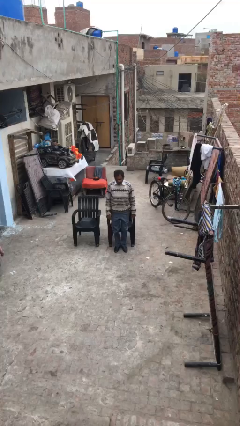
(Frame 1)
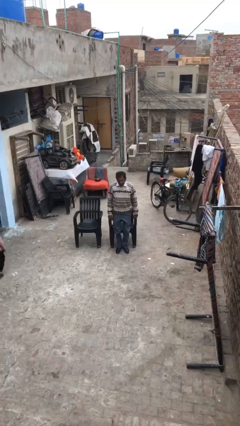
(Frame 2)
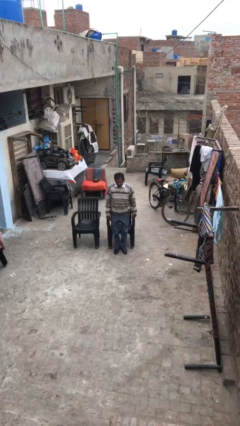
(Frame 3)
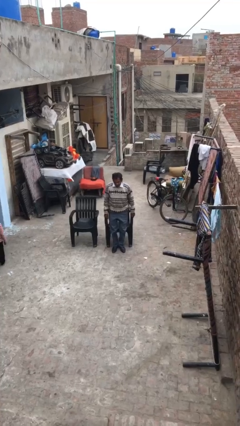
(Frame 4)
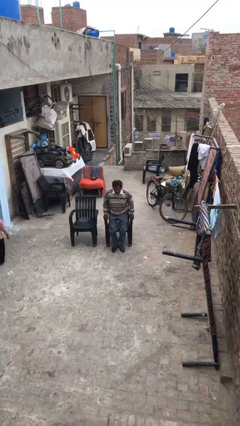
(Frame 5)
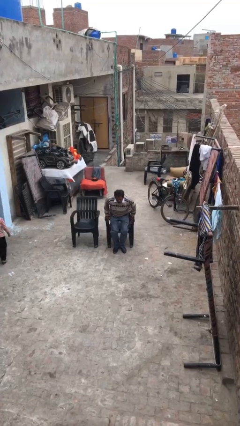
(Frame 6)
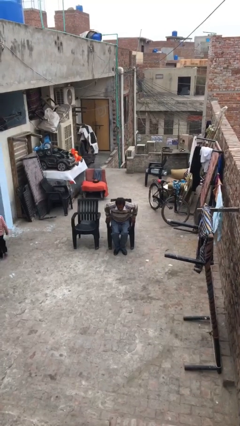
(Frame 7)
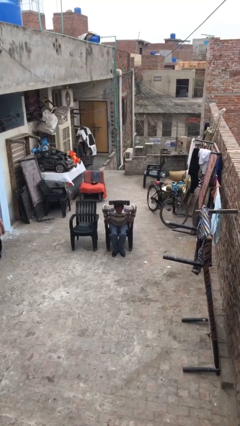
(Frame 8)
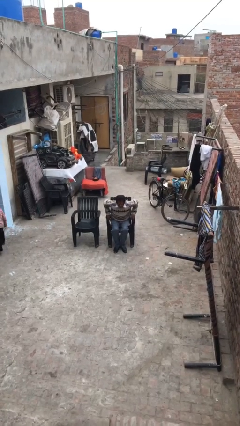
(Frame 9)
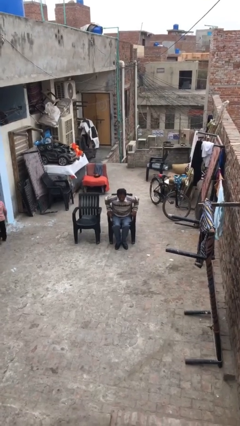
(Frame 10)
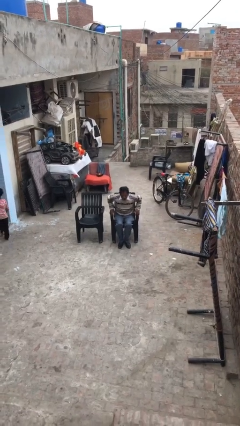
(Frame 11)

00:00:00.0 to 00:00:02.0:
person sits down

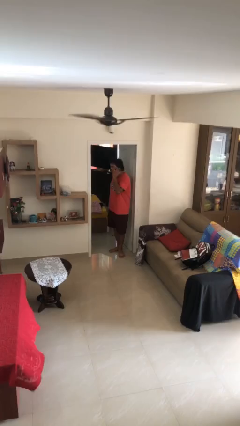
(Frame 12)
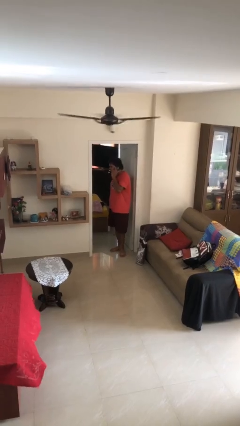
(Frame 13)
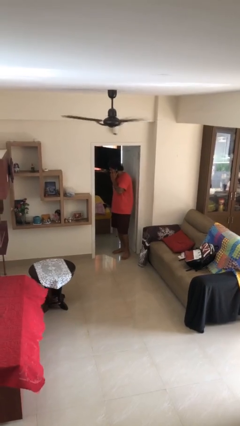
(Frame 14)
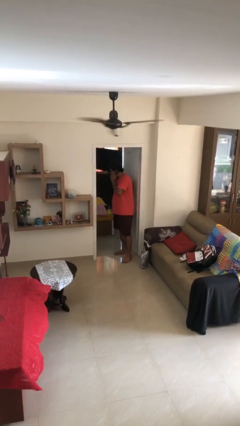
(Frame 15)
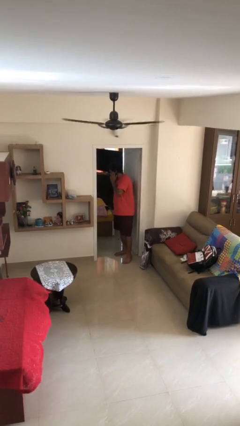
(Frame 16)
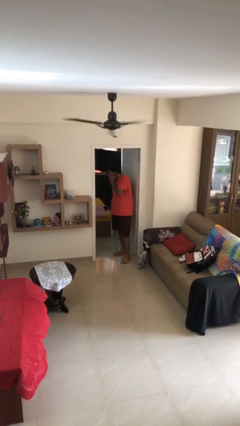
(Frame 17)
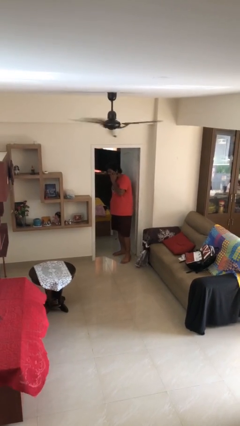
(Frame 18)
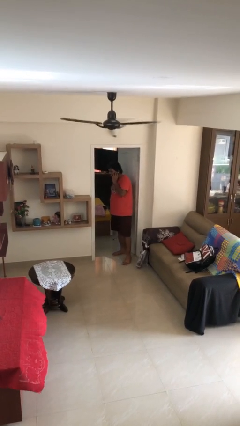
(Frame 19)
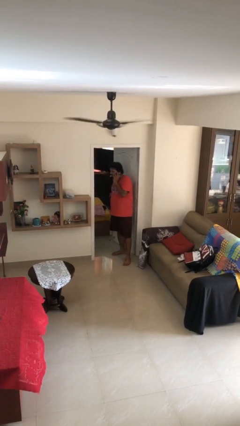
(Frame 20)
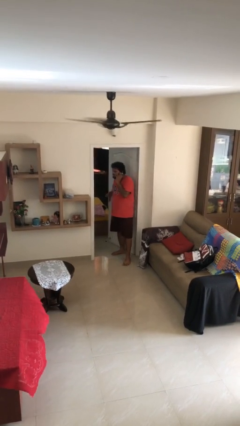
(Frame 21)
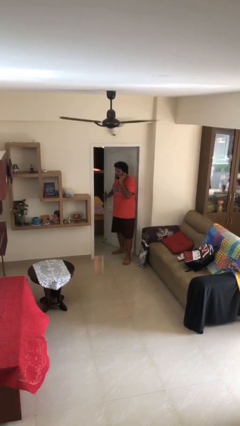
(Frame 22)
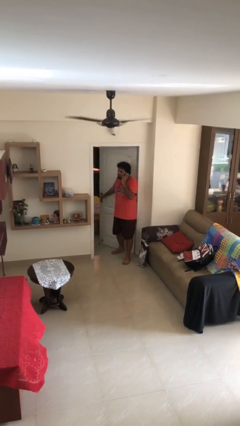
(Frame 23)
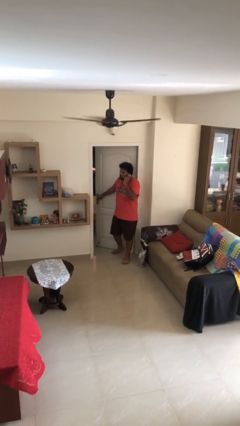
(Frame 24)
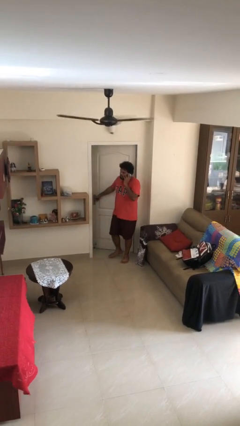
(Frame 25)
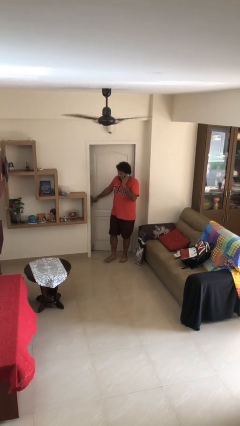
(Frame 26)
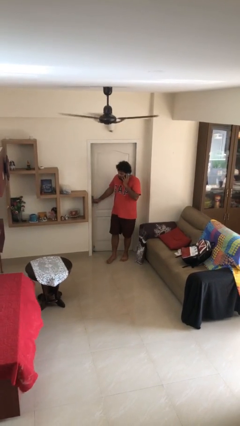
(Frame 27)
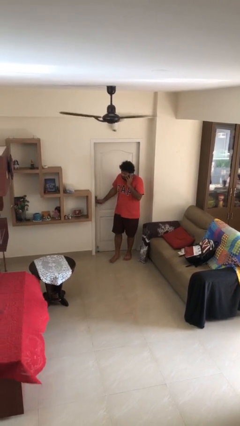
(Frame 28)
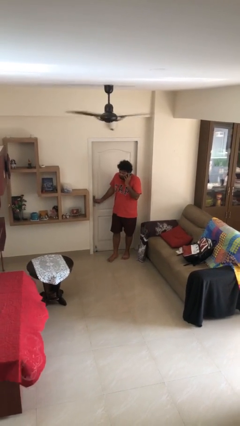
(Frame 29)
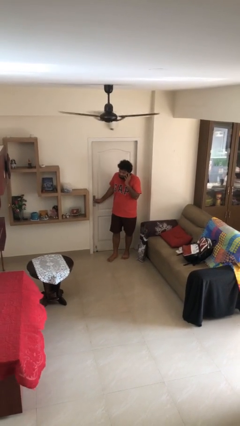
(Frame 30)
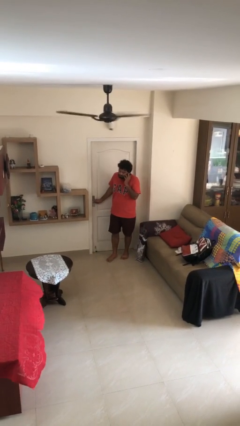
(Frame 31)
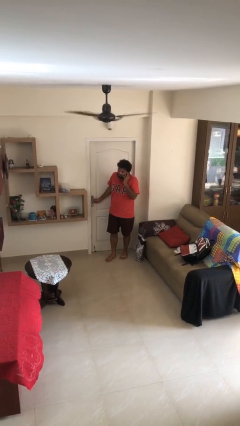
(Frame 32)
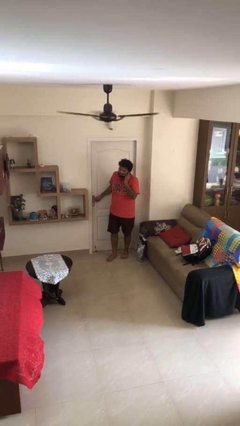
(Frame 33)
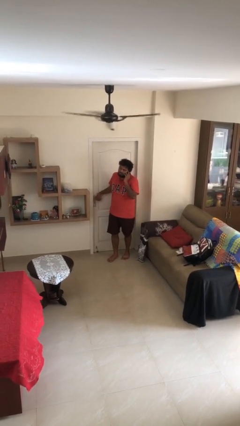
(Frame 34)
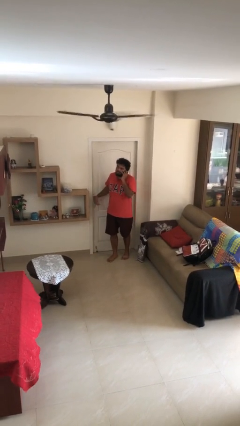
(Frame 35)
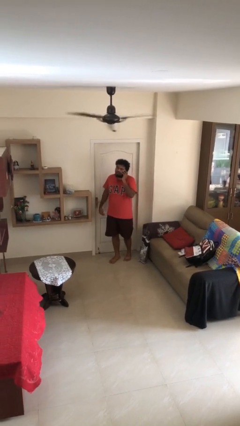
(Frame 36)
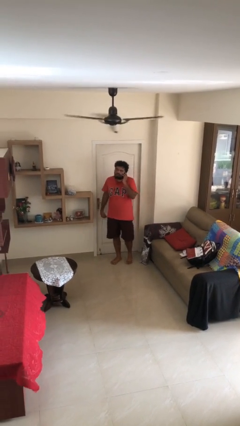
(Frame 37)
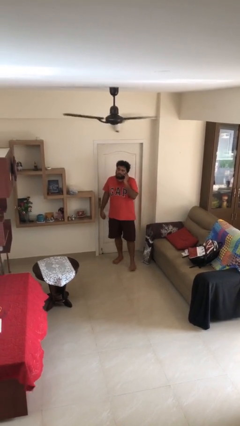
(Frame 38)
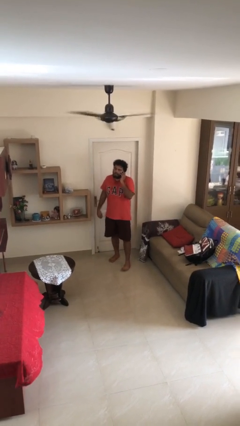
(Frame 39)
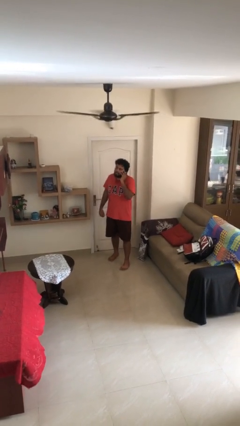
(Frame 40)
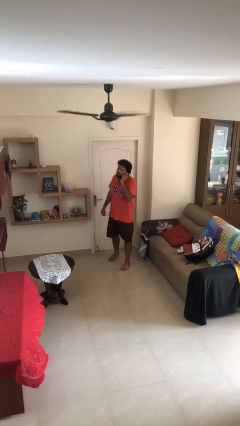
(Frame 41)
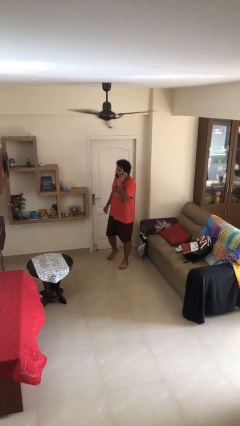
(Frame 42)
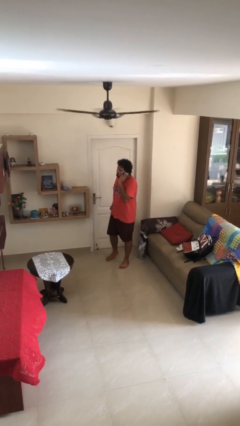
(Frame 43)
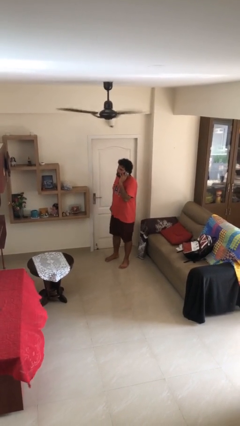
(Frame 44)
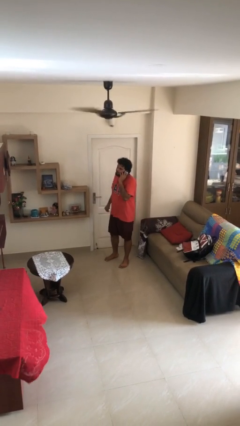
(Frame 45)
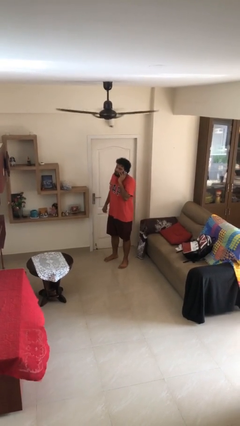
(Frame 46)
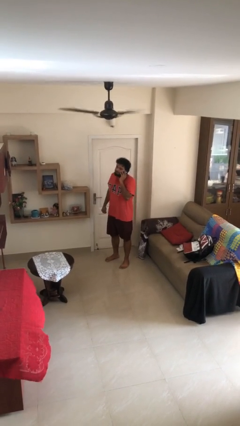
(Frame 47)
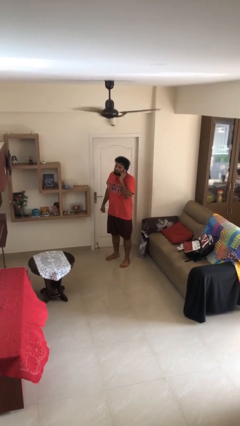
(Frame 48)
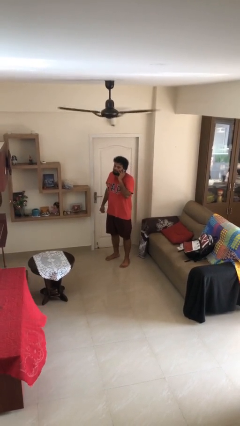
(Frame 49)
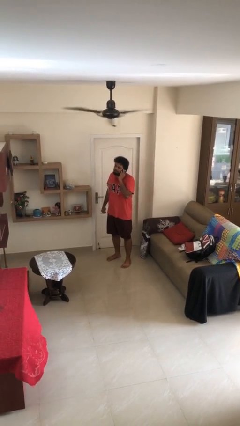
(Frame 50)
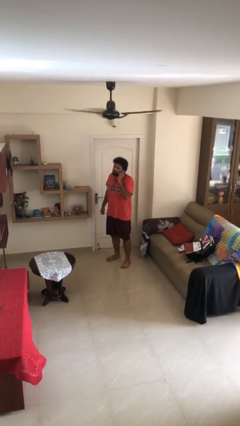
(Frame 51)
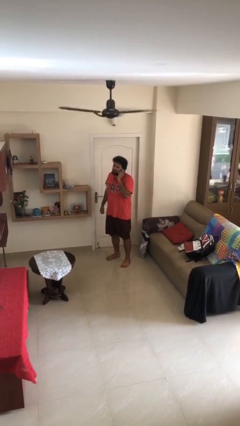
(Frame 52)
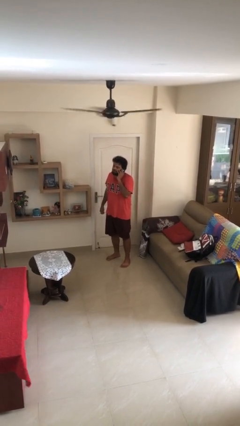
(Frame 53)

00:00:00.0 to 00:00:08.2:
person closes facility door

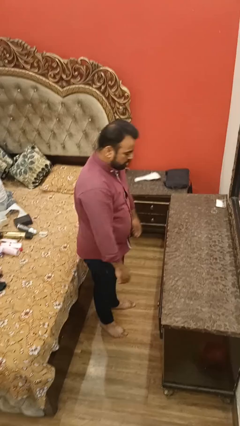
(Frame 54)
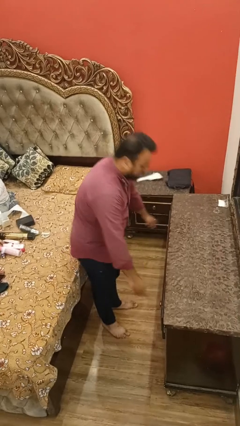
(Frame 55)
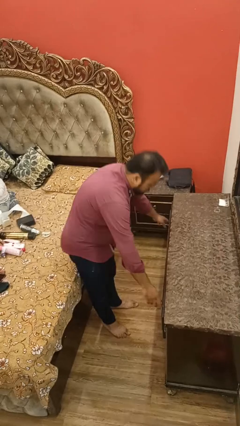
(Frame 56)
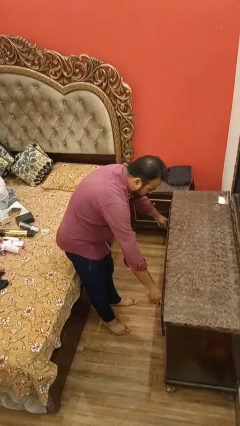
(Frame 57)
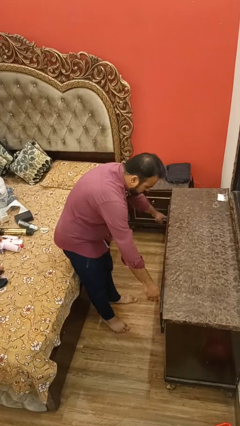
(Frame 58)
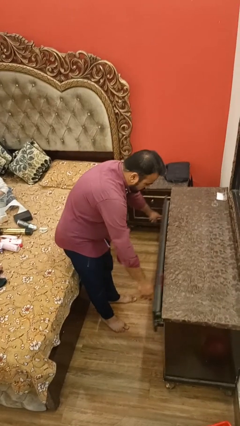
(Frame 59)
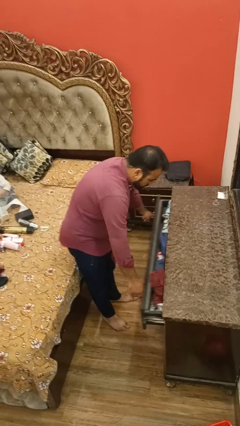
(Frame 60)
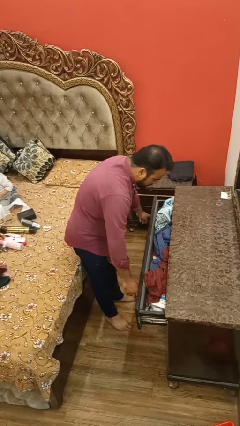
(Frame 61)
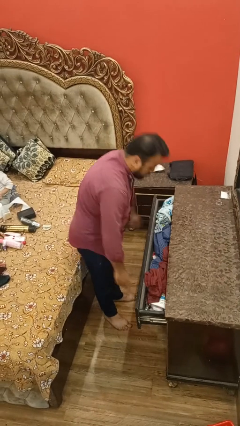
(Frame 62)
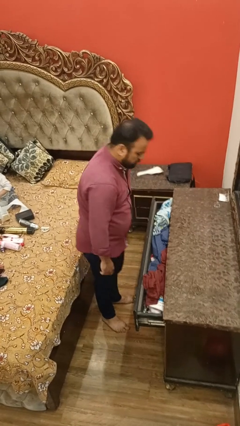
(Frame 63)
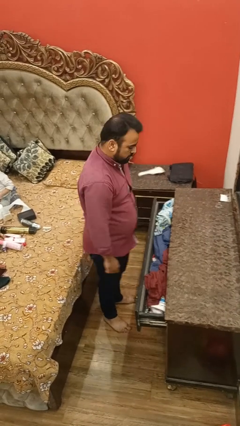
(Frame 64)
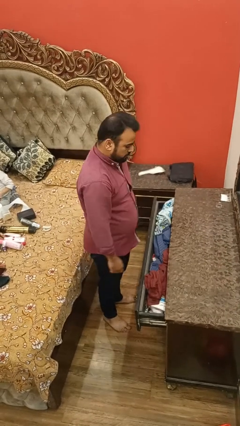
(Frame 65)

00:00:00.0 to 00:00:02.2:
person opens dresser drawer

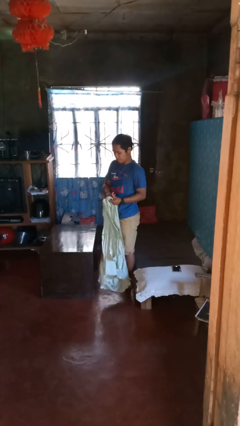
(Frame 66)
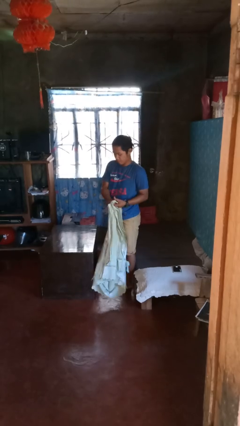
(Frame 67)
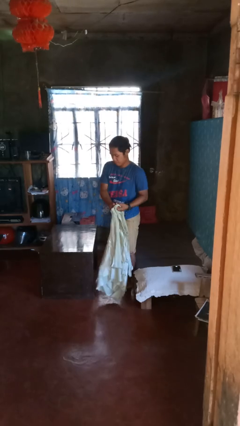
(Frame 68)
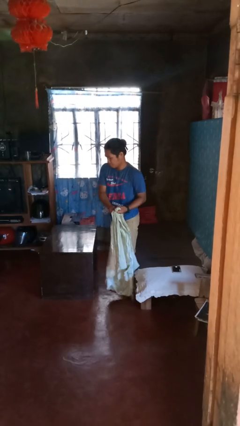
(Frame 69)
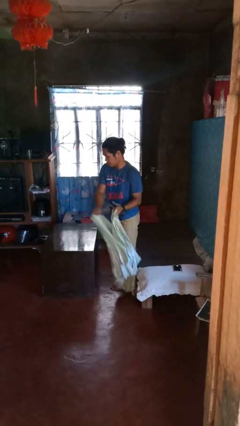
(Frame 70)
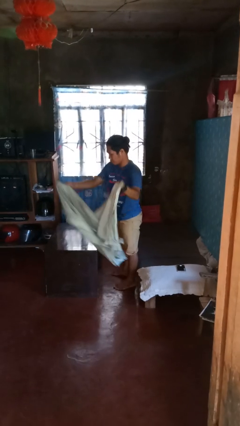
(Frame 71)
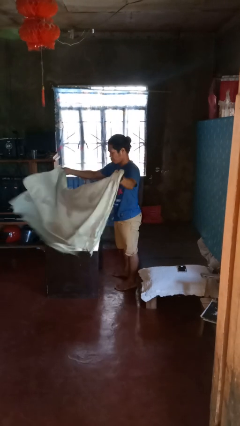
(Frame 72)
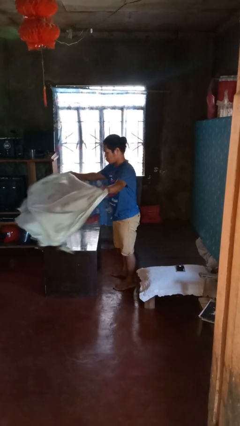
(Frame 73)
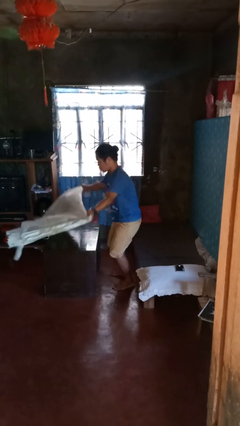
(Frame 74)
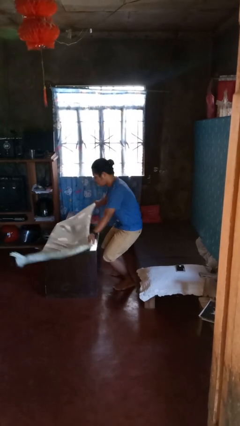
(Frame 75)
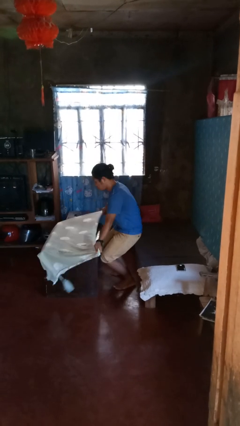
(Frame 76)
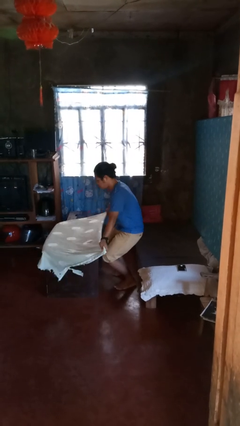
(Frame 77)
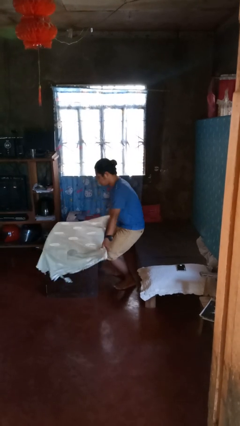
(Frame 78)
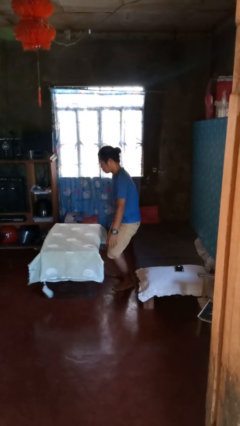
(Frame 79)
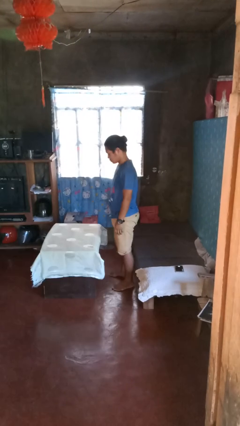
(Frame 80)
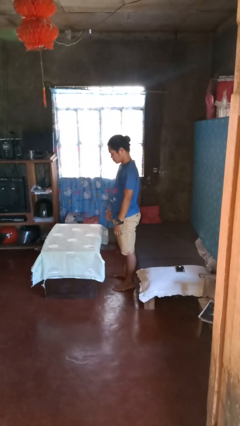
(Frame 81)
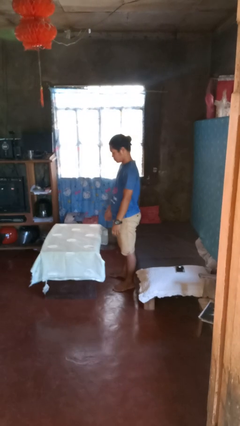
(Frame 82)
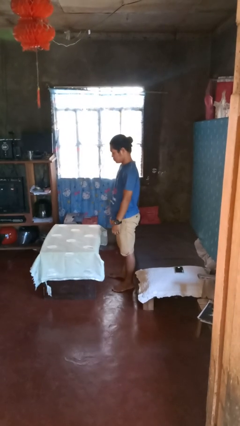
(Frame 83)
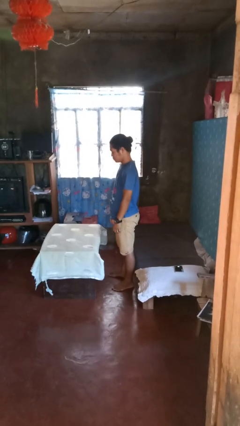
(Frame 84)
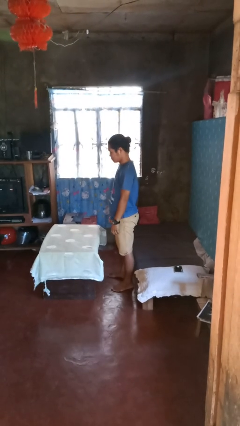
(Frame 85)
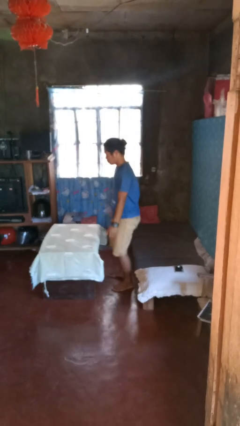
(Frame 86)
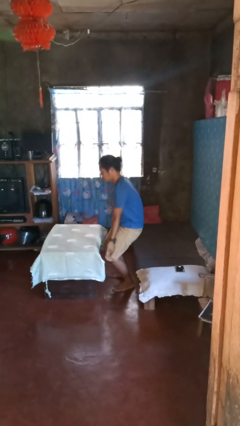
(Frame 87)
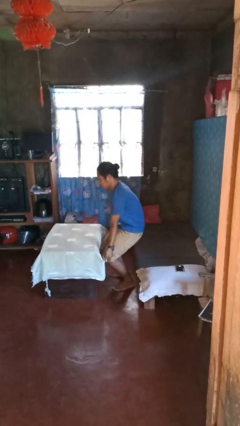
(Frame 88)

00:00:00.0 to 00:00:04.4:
person spreads tablecloth

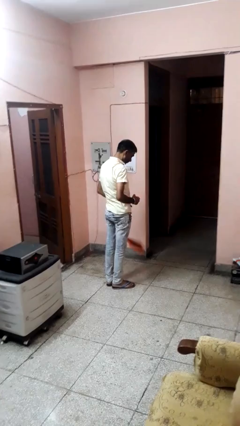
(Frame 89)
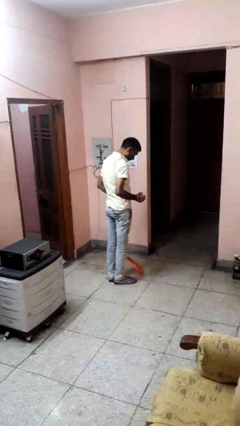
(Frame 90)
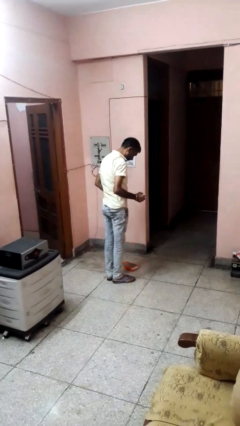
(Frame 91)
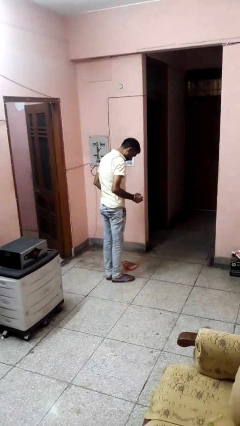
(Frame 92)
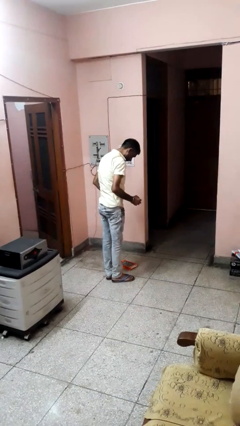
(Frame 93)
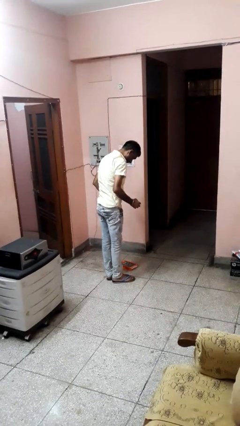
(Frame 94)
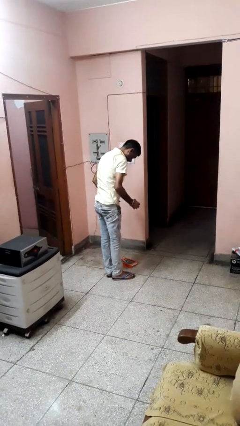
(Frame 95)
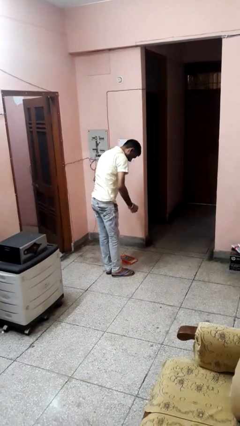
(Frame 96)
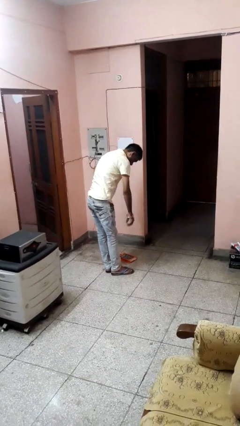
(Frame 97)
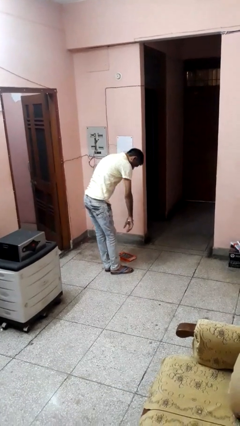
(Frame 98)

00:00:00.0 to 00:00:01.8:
person drops object
